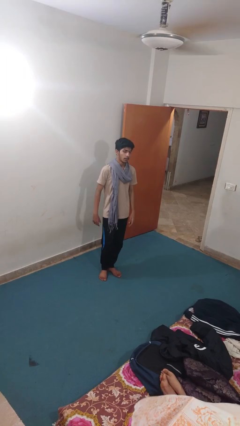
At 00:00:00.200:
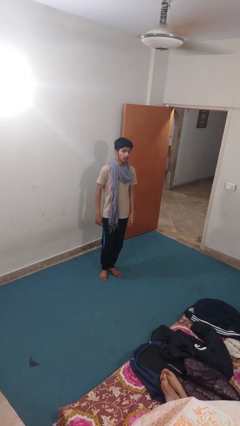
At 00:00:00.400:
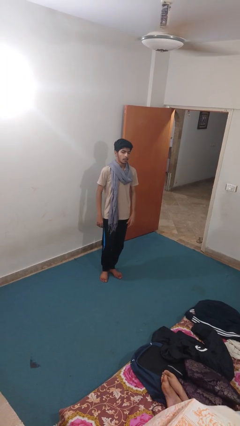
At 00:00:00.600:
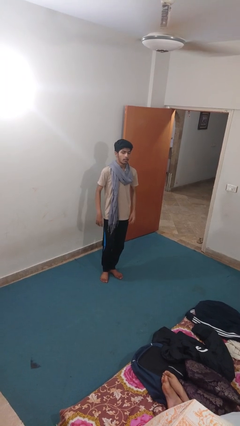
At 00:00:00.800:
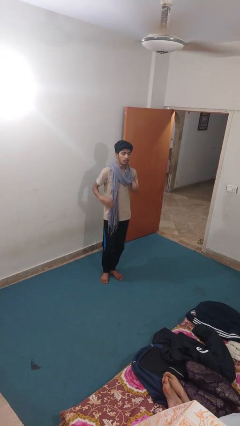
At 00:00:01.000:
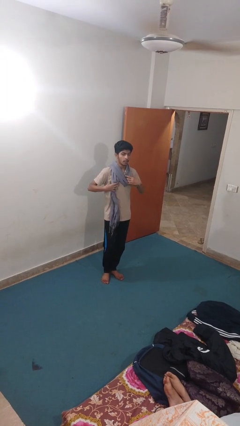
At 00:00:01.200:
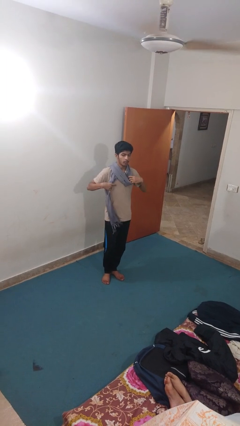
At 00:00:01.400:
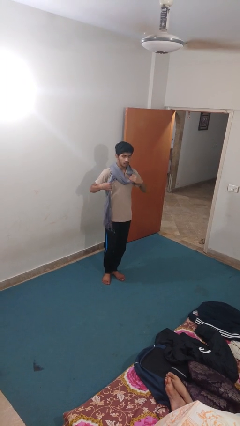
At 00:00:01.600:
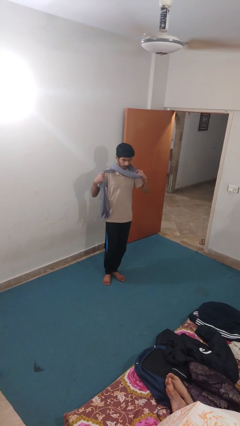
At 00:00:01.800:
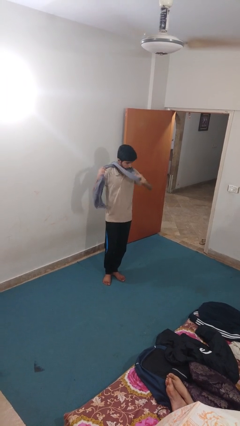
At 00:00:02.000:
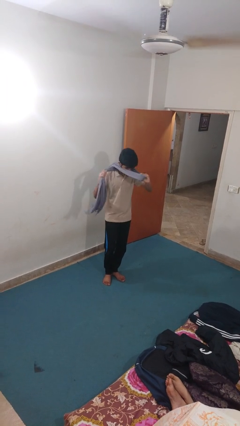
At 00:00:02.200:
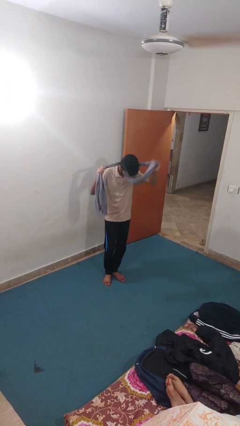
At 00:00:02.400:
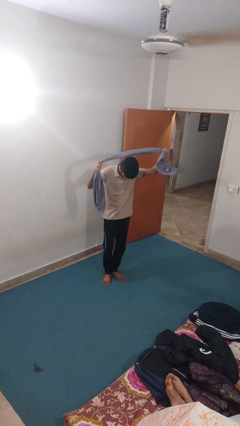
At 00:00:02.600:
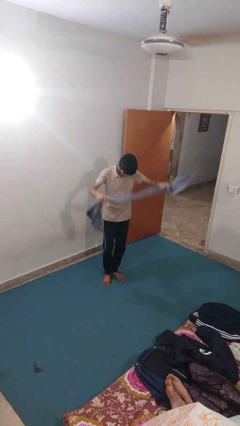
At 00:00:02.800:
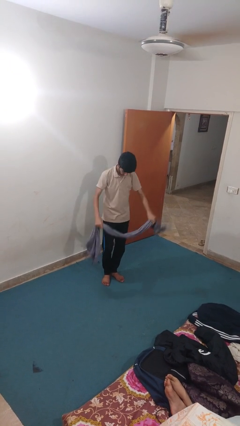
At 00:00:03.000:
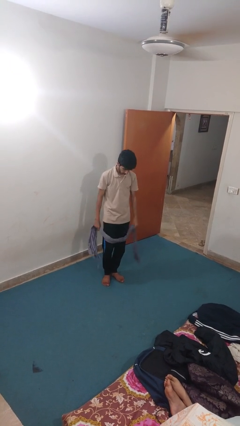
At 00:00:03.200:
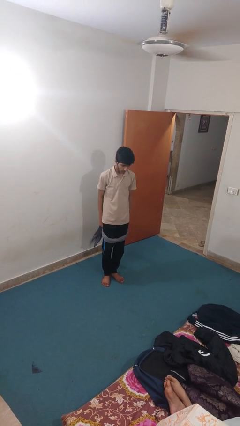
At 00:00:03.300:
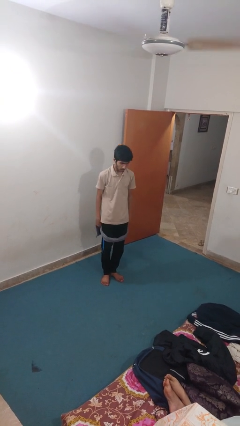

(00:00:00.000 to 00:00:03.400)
person takes off scarf

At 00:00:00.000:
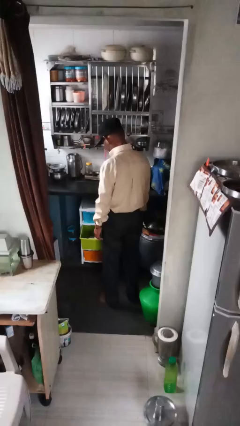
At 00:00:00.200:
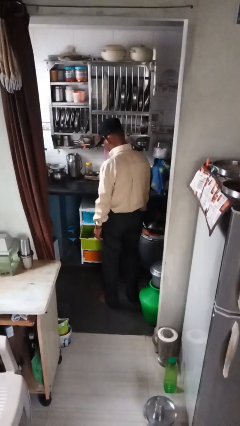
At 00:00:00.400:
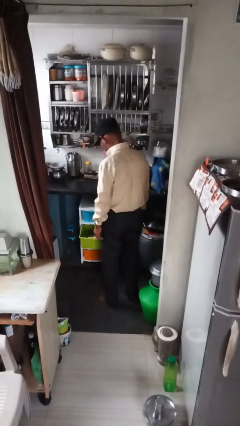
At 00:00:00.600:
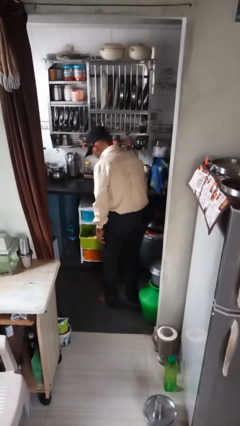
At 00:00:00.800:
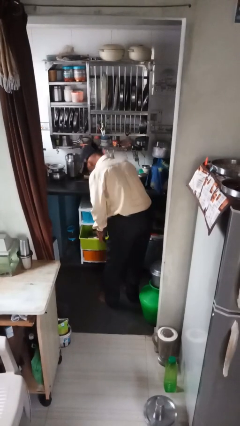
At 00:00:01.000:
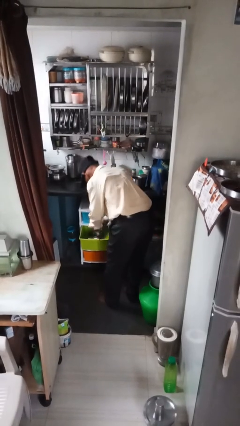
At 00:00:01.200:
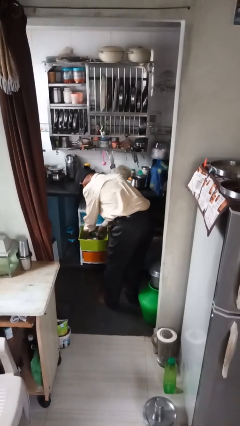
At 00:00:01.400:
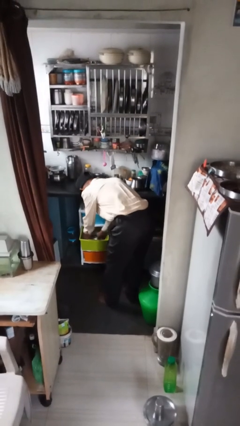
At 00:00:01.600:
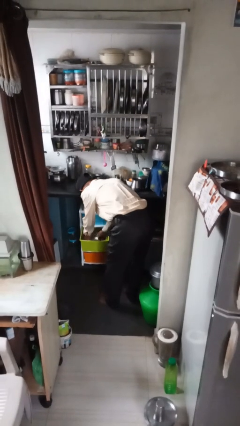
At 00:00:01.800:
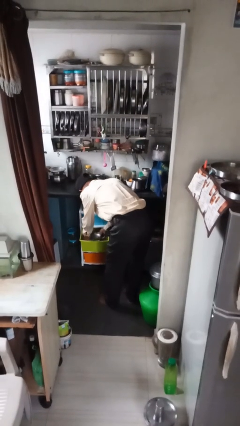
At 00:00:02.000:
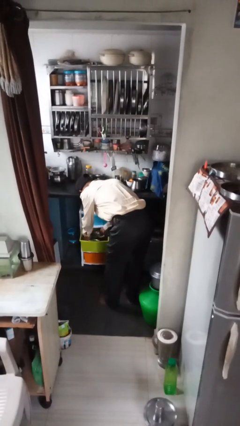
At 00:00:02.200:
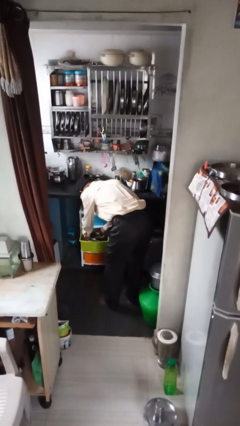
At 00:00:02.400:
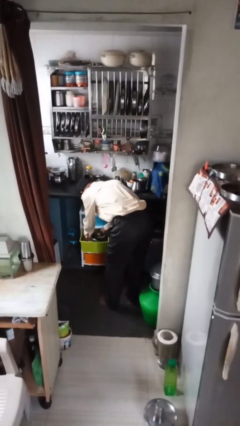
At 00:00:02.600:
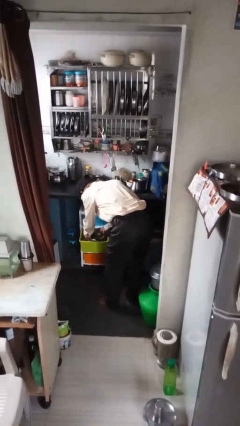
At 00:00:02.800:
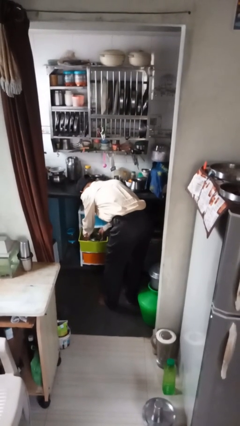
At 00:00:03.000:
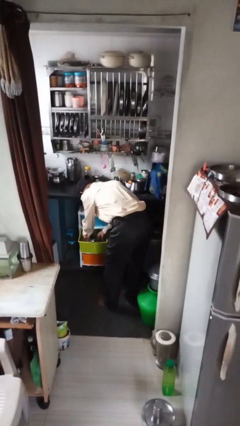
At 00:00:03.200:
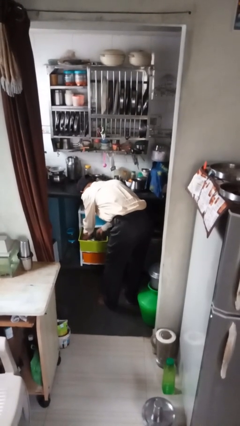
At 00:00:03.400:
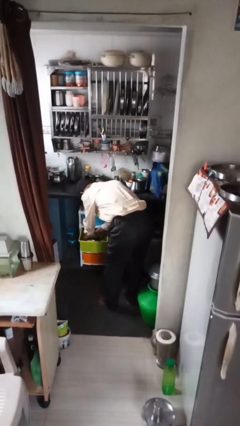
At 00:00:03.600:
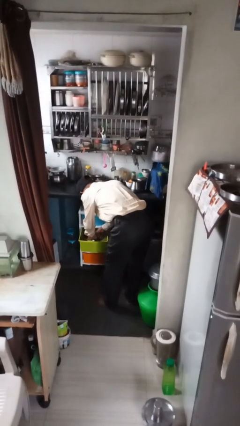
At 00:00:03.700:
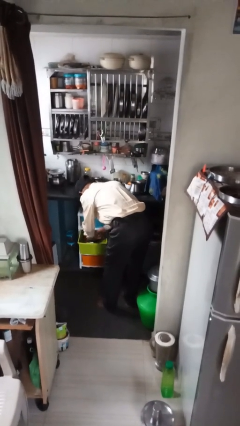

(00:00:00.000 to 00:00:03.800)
person searches in kitchen drawer

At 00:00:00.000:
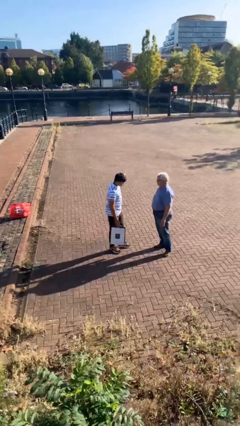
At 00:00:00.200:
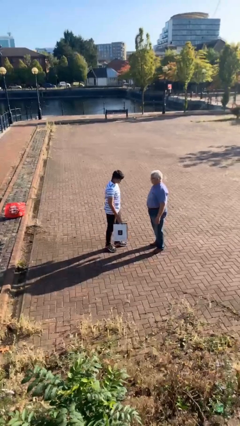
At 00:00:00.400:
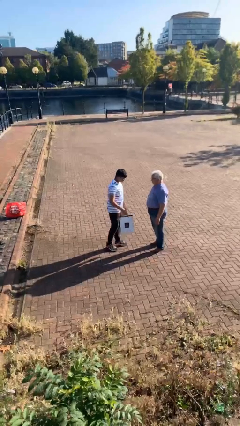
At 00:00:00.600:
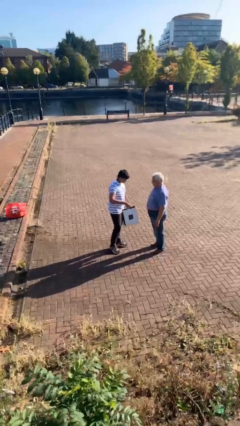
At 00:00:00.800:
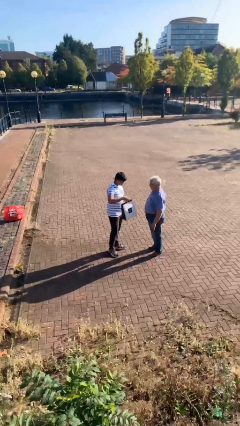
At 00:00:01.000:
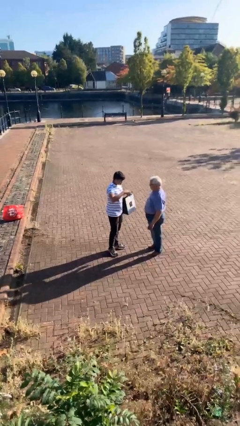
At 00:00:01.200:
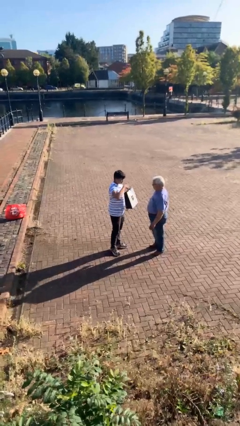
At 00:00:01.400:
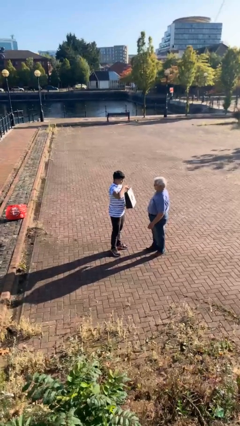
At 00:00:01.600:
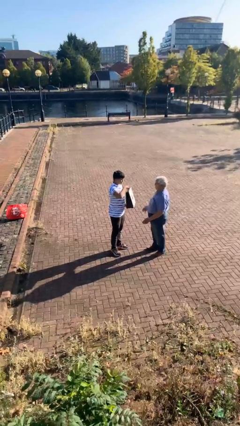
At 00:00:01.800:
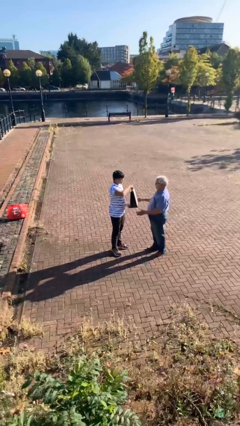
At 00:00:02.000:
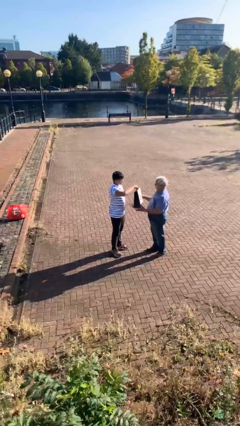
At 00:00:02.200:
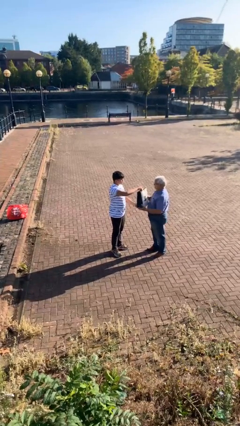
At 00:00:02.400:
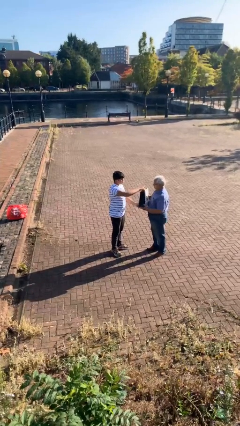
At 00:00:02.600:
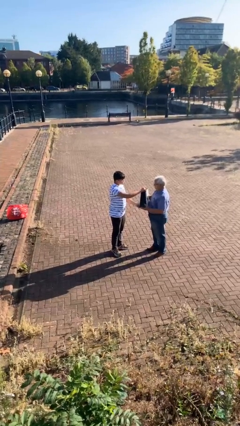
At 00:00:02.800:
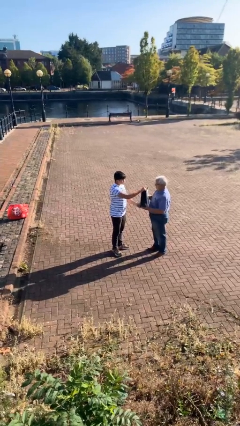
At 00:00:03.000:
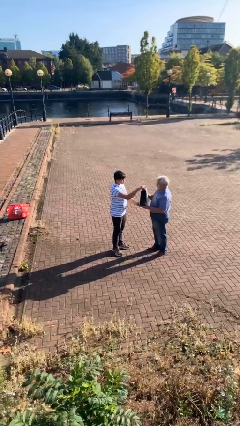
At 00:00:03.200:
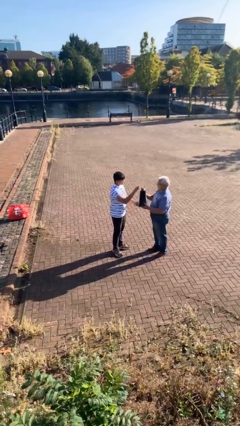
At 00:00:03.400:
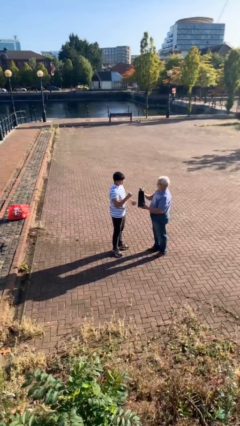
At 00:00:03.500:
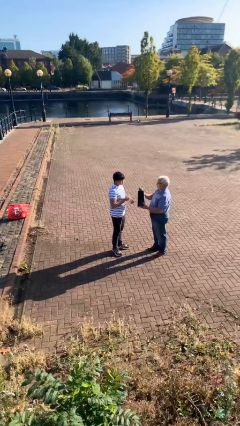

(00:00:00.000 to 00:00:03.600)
person transfers object to person

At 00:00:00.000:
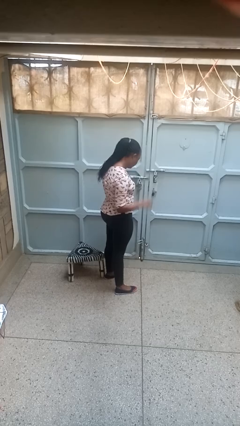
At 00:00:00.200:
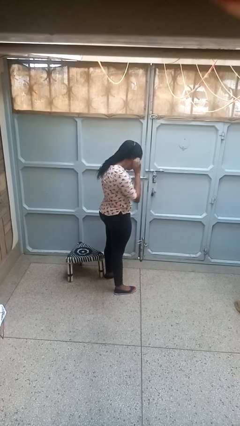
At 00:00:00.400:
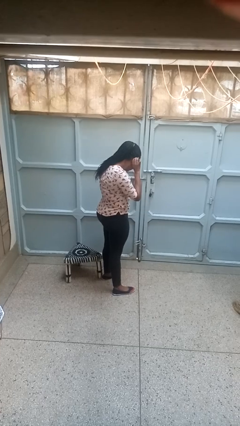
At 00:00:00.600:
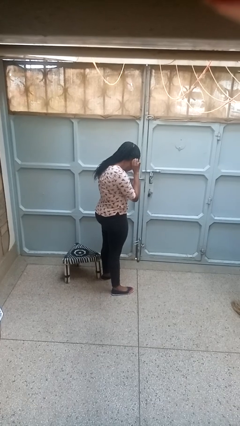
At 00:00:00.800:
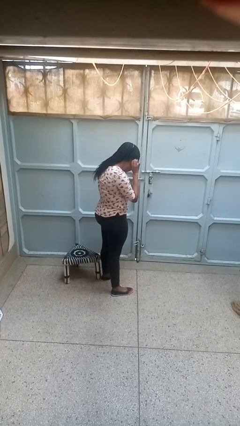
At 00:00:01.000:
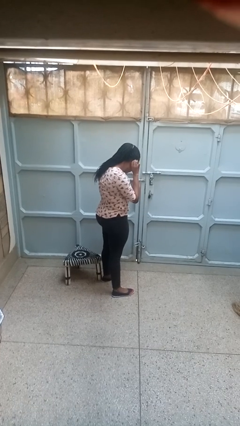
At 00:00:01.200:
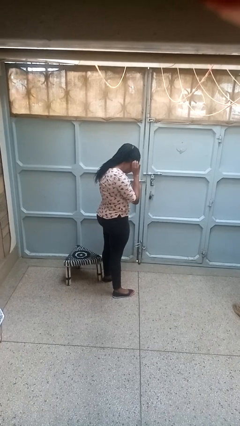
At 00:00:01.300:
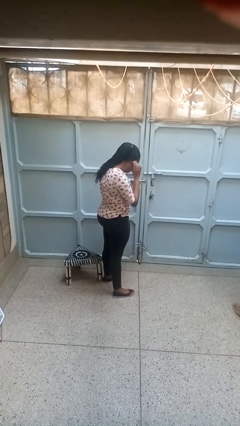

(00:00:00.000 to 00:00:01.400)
person gestures listen closely

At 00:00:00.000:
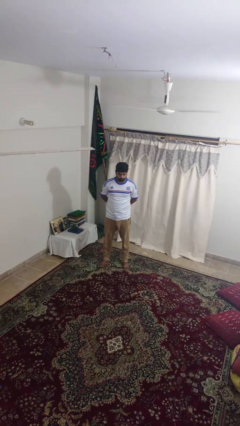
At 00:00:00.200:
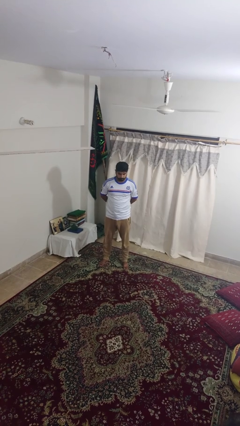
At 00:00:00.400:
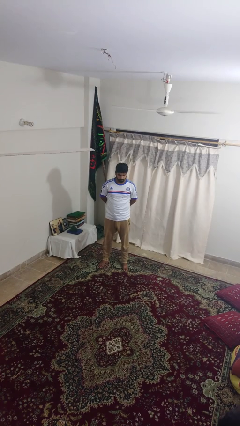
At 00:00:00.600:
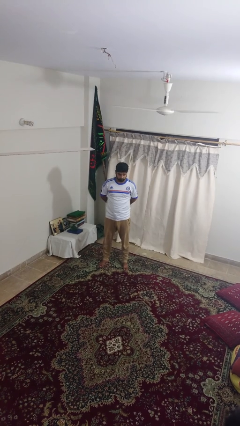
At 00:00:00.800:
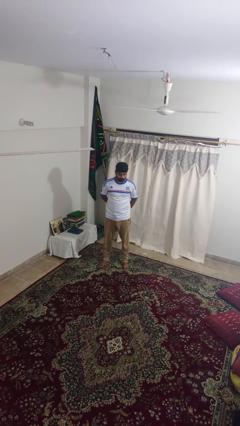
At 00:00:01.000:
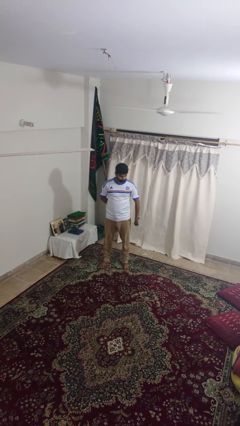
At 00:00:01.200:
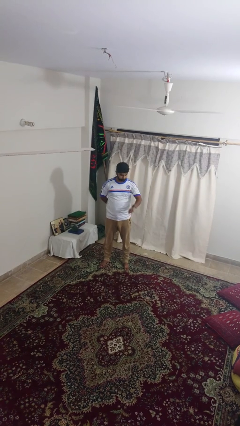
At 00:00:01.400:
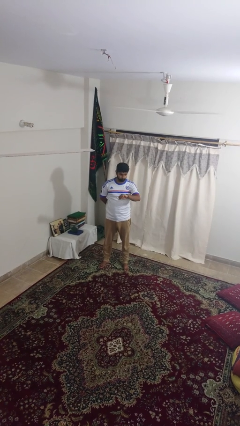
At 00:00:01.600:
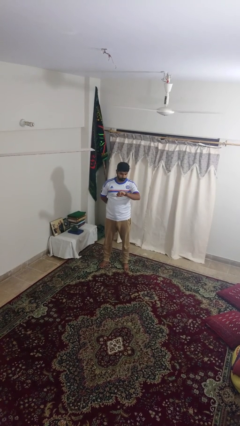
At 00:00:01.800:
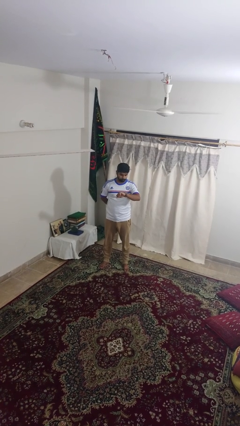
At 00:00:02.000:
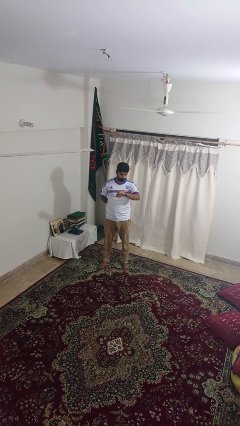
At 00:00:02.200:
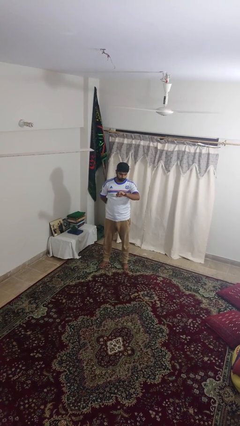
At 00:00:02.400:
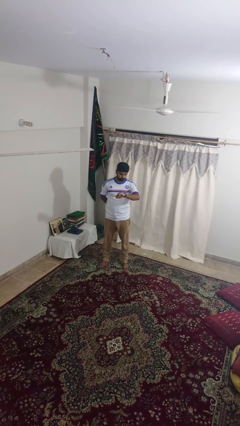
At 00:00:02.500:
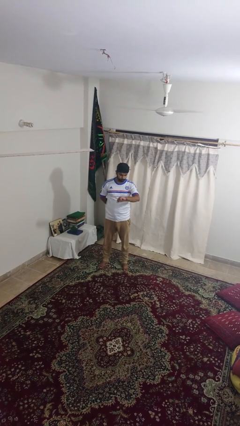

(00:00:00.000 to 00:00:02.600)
person looks at wristwatch

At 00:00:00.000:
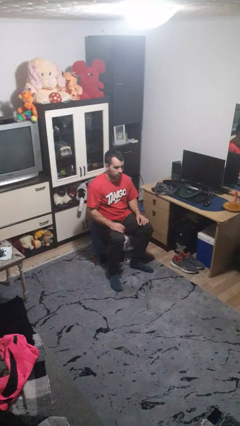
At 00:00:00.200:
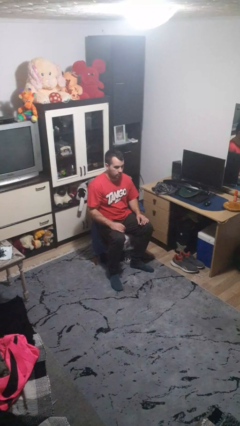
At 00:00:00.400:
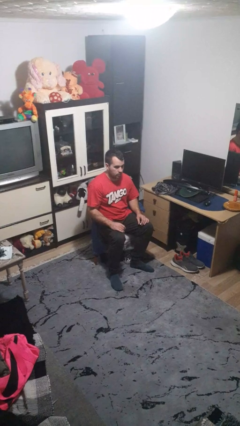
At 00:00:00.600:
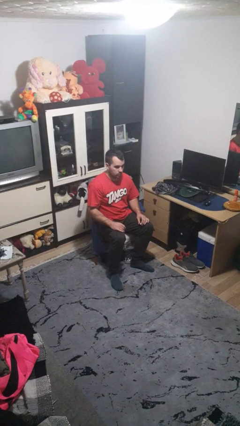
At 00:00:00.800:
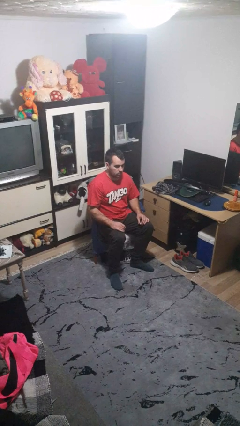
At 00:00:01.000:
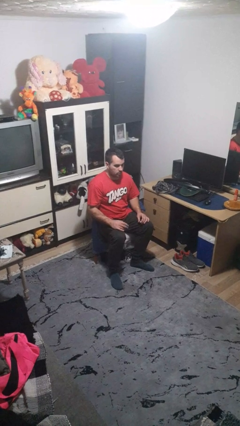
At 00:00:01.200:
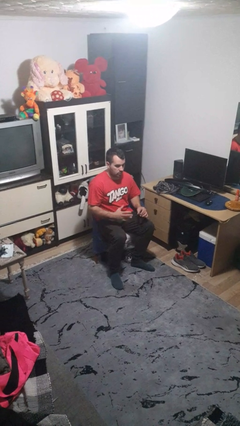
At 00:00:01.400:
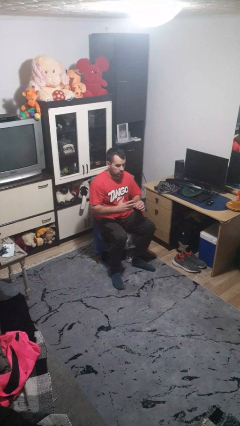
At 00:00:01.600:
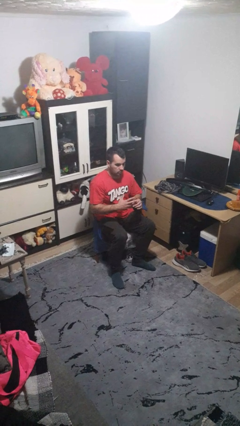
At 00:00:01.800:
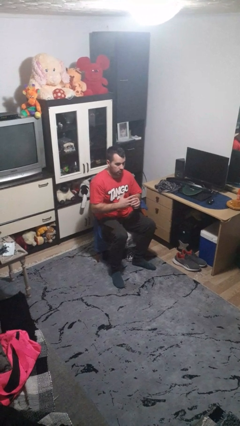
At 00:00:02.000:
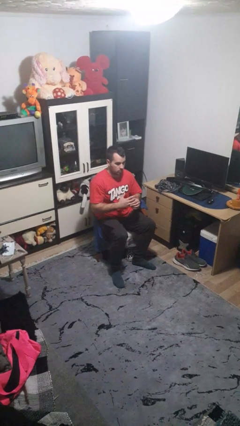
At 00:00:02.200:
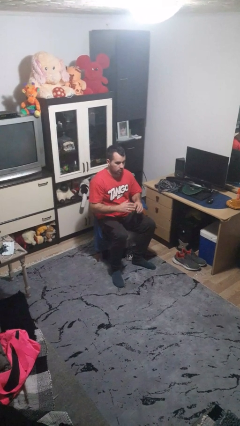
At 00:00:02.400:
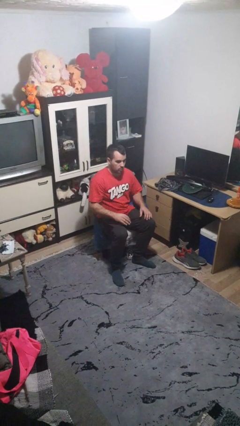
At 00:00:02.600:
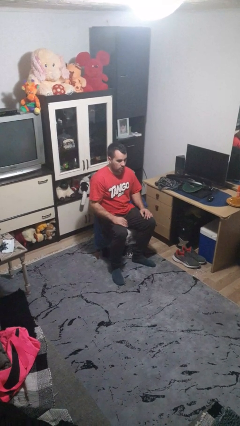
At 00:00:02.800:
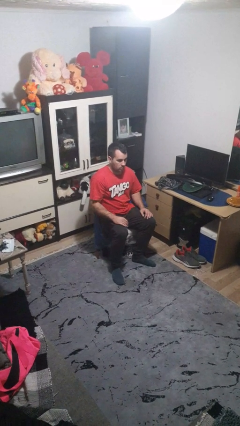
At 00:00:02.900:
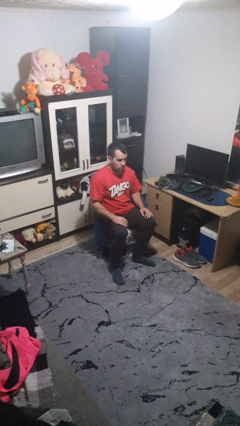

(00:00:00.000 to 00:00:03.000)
person puts on ring
